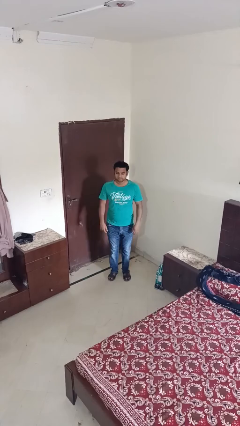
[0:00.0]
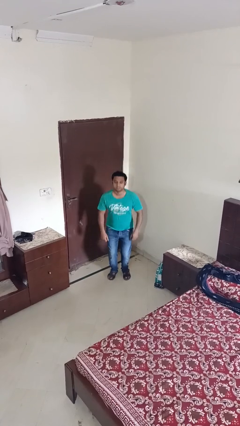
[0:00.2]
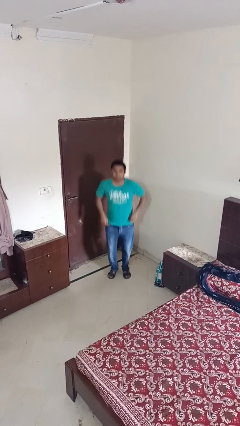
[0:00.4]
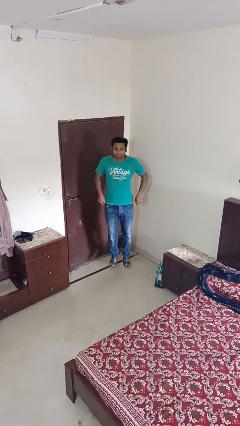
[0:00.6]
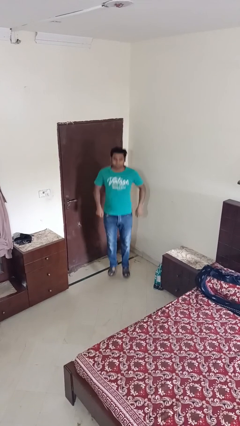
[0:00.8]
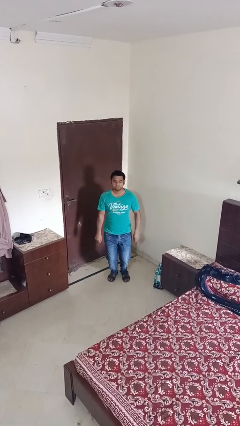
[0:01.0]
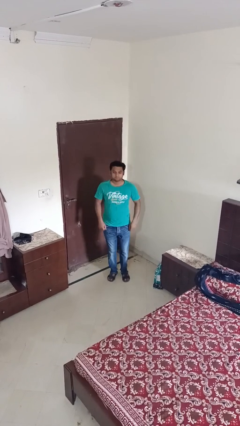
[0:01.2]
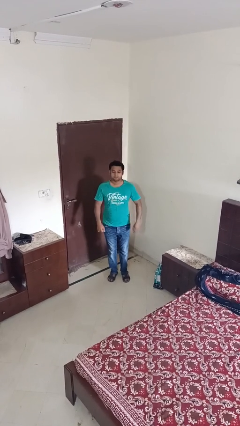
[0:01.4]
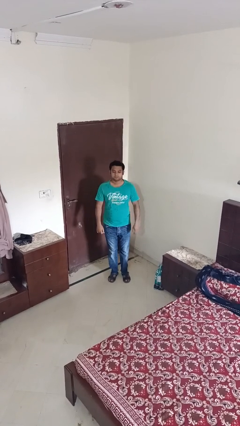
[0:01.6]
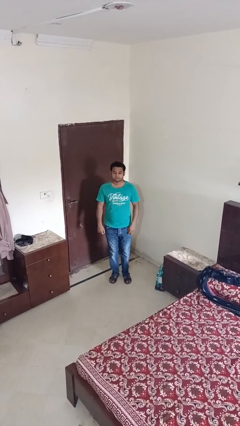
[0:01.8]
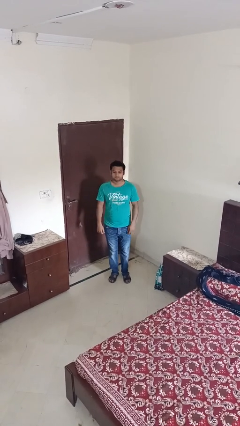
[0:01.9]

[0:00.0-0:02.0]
person jumps

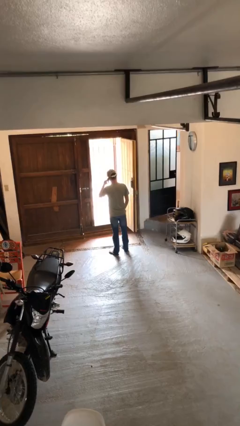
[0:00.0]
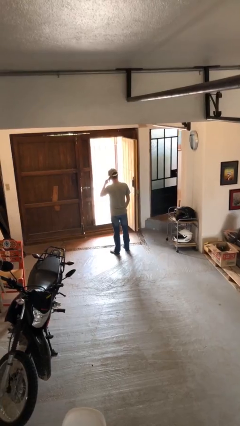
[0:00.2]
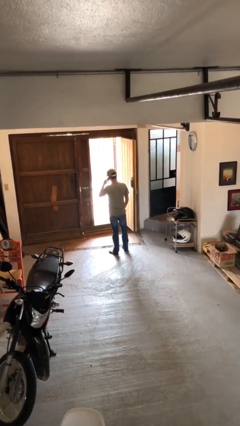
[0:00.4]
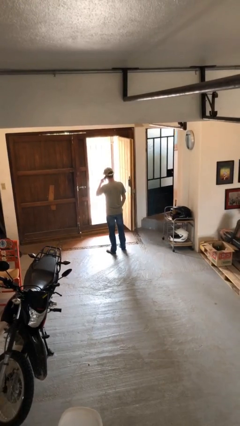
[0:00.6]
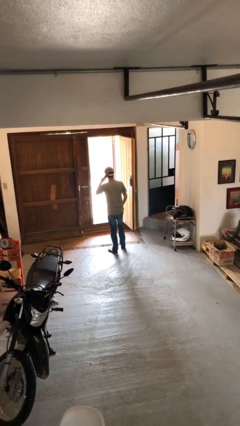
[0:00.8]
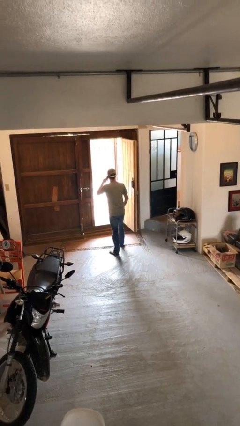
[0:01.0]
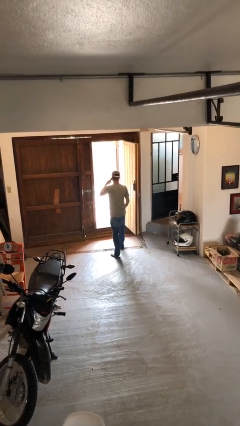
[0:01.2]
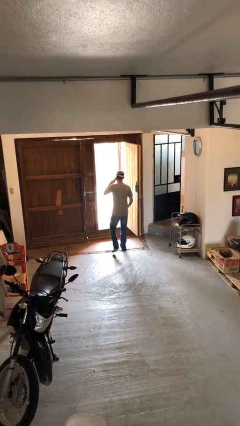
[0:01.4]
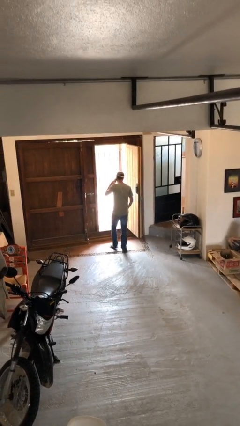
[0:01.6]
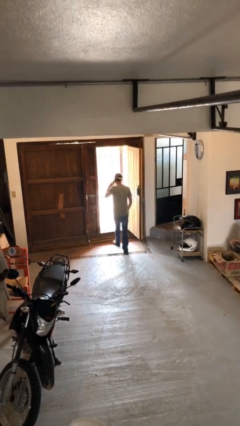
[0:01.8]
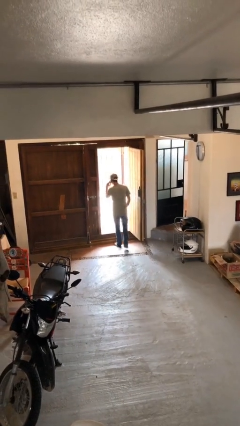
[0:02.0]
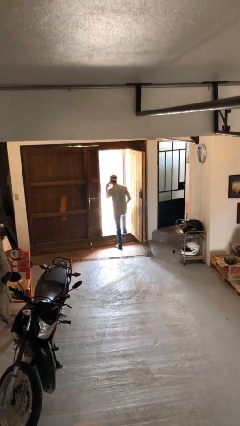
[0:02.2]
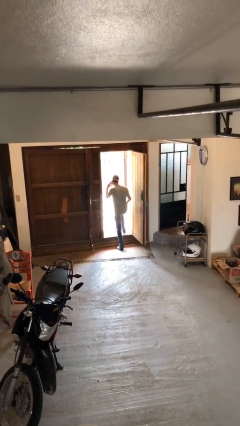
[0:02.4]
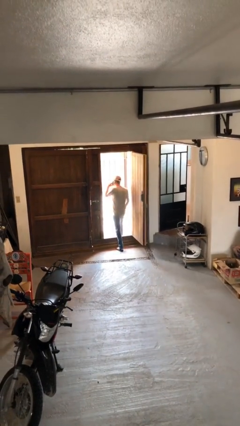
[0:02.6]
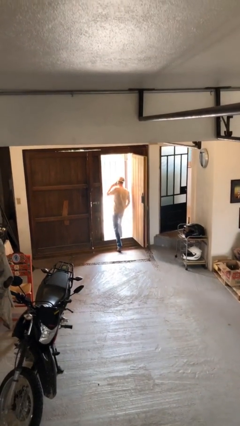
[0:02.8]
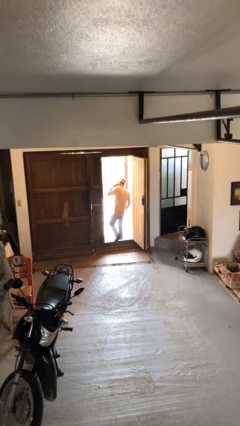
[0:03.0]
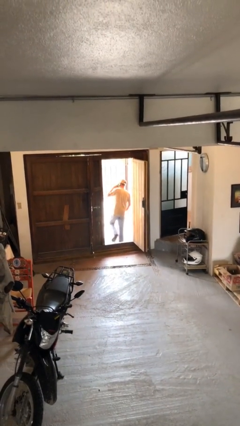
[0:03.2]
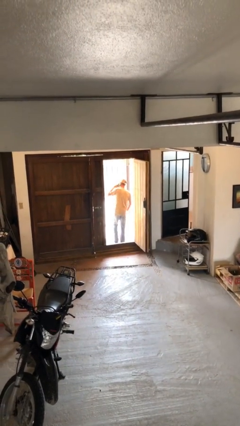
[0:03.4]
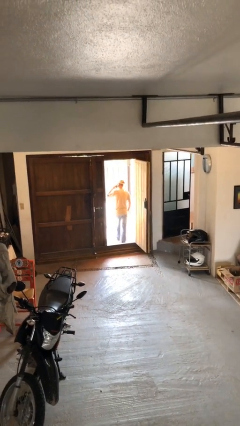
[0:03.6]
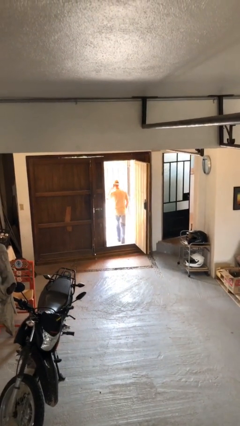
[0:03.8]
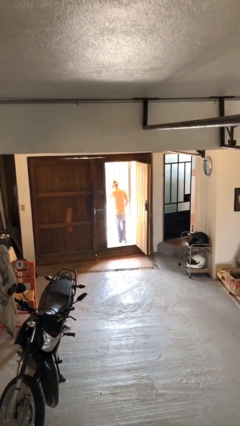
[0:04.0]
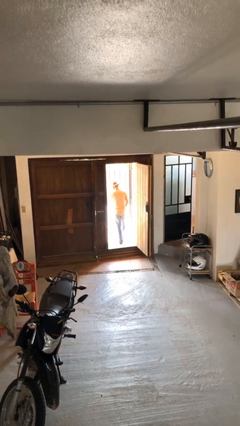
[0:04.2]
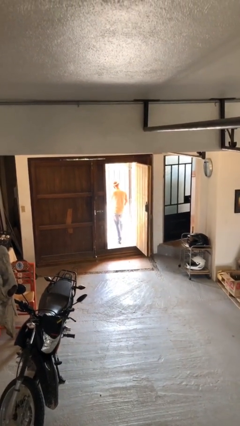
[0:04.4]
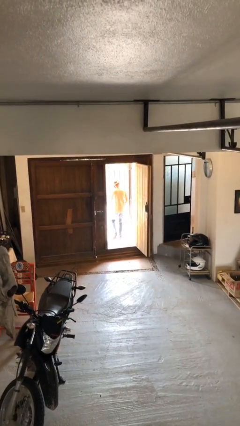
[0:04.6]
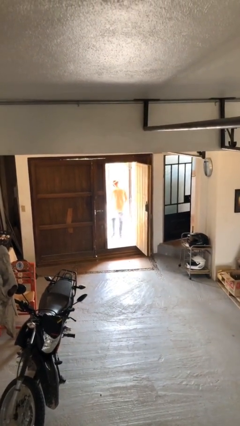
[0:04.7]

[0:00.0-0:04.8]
person exits scene through structure

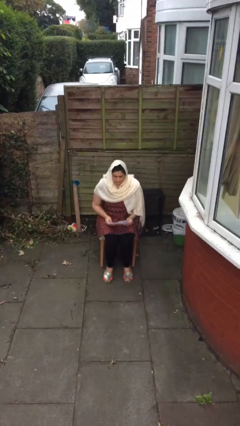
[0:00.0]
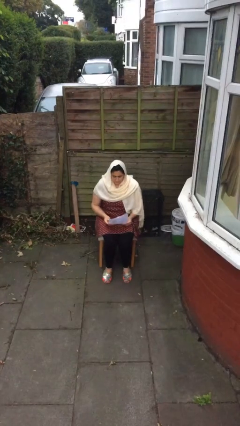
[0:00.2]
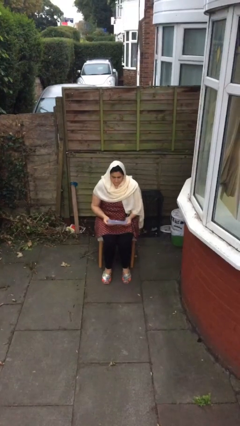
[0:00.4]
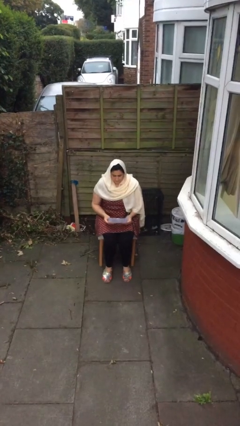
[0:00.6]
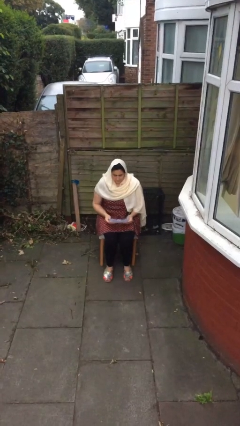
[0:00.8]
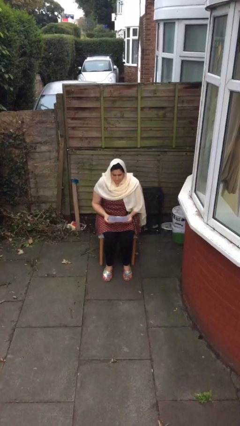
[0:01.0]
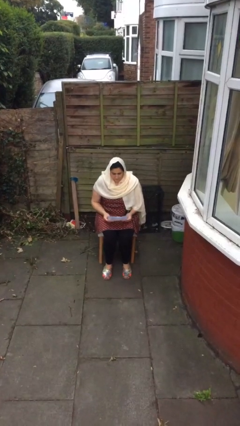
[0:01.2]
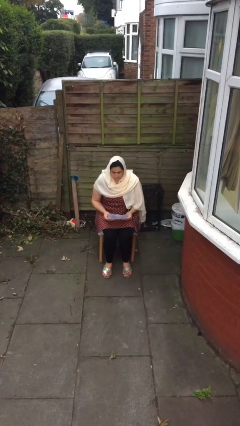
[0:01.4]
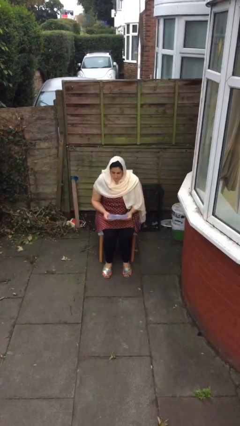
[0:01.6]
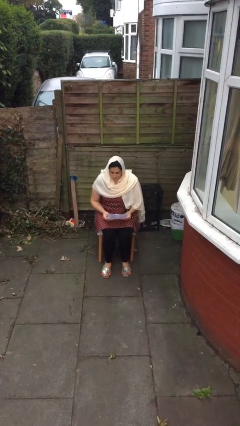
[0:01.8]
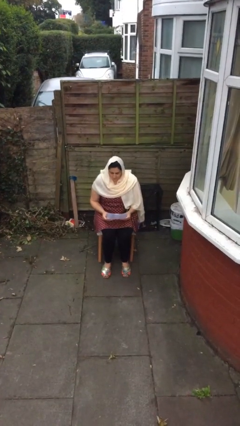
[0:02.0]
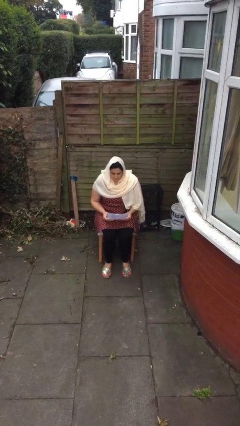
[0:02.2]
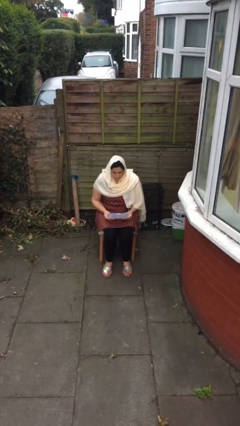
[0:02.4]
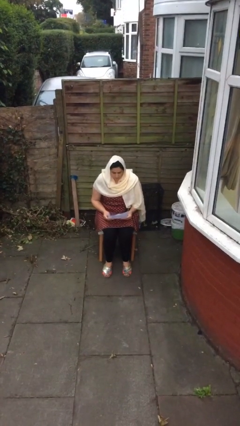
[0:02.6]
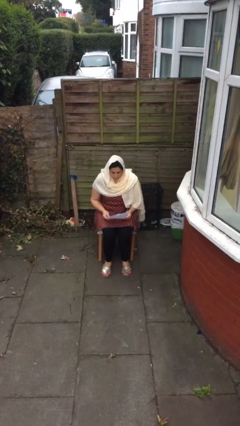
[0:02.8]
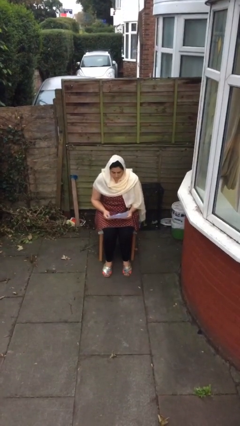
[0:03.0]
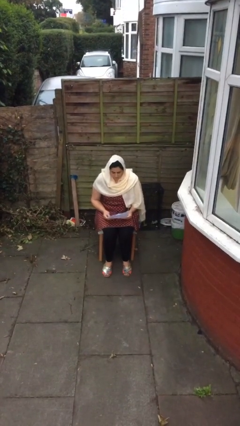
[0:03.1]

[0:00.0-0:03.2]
person reads document

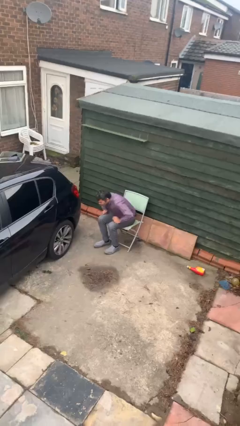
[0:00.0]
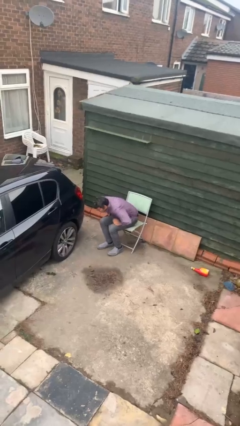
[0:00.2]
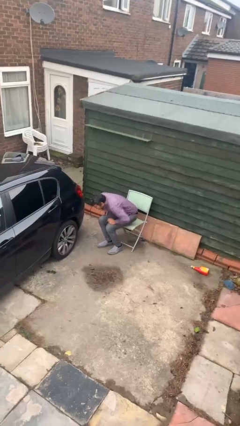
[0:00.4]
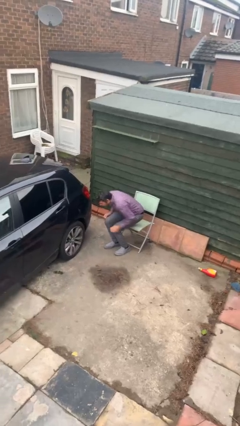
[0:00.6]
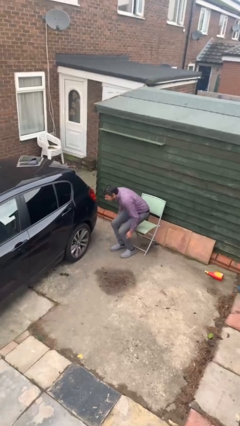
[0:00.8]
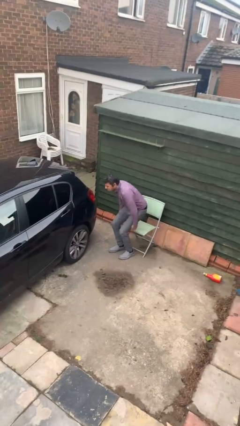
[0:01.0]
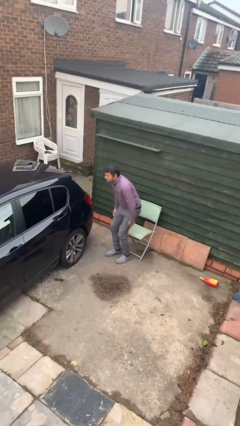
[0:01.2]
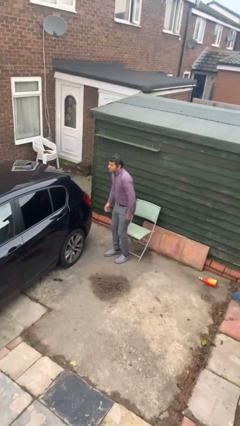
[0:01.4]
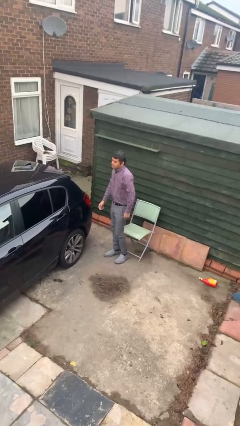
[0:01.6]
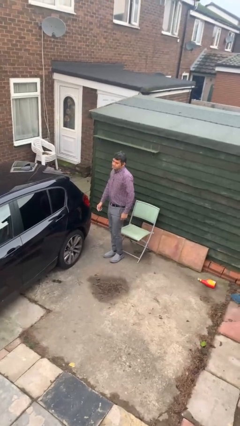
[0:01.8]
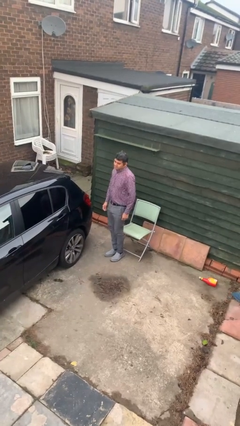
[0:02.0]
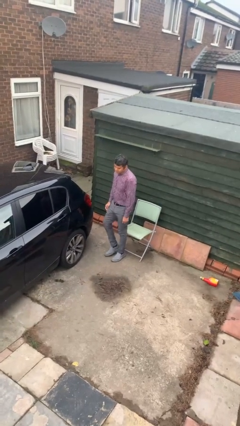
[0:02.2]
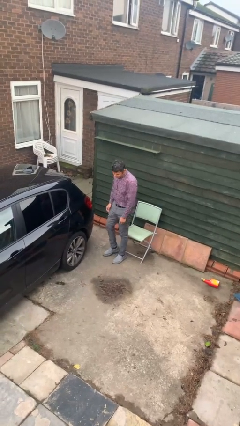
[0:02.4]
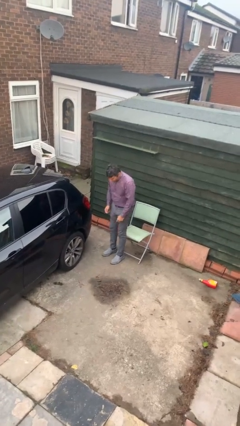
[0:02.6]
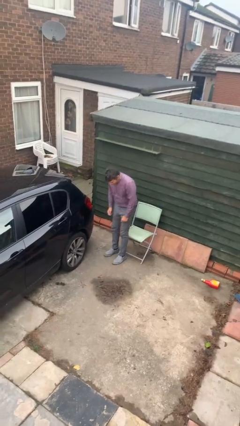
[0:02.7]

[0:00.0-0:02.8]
person stands up

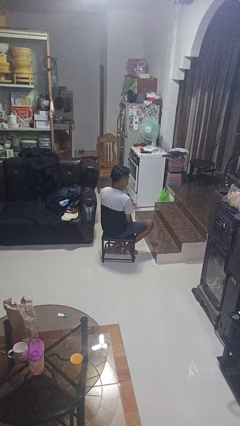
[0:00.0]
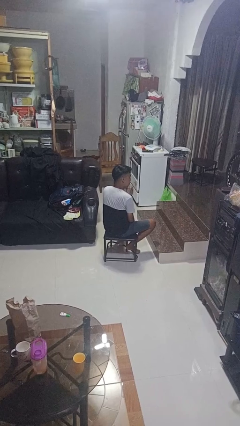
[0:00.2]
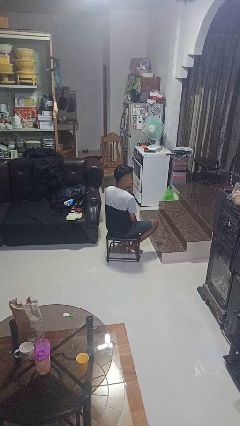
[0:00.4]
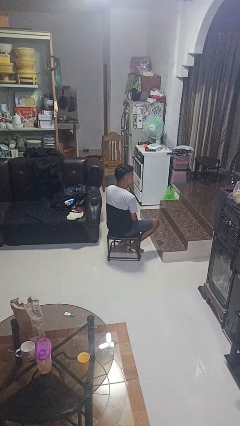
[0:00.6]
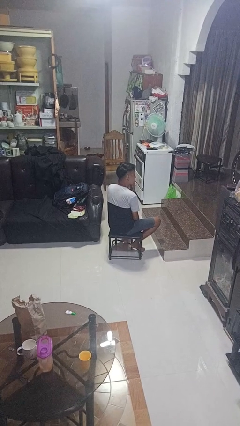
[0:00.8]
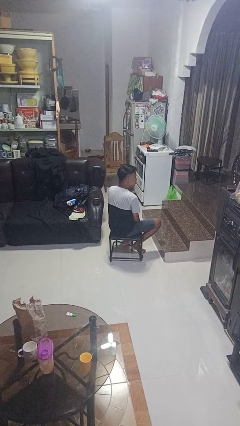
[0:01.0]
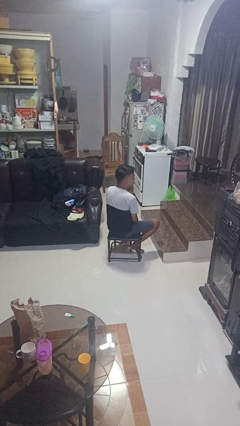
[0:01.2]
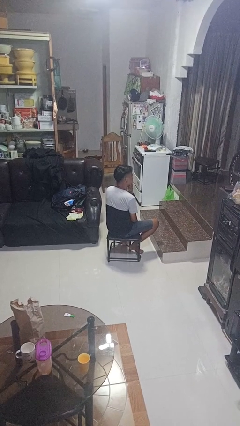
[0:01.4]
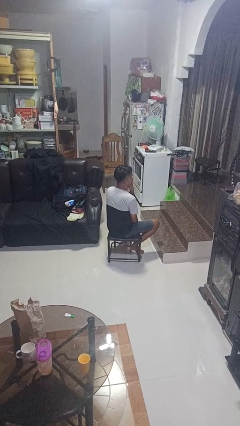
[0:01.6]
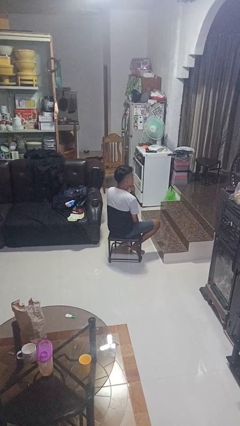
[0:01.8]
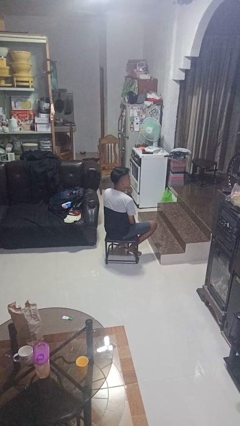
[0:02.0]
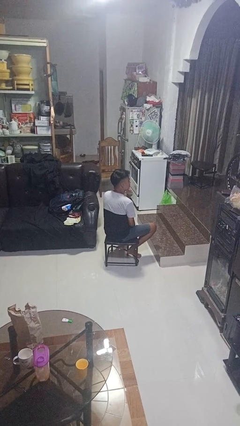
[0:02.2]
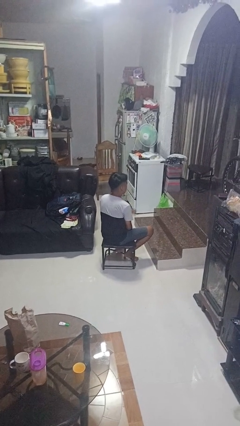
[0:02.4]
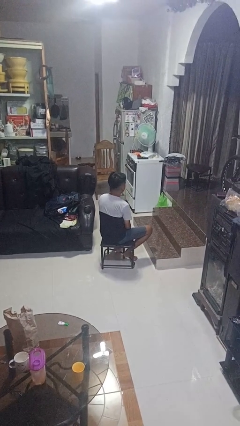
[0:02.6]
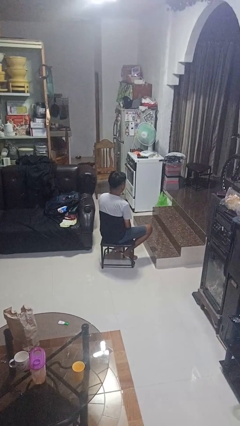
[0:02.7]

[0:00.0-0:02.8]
person strokes chin

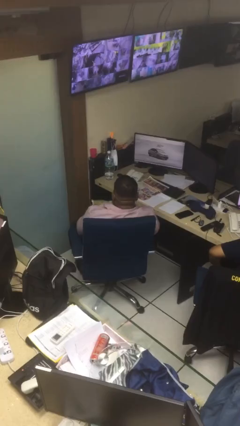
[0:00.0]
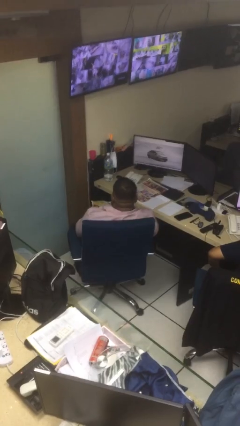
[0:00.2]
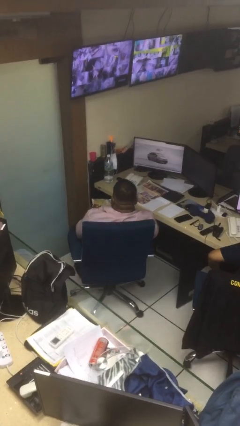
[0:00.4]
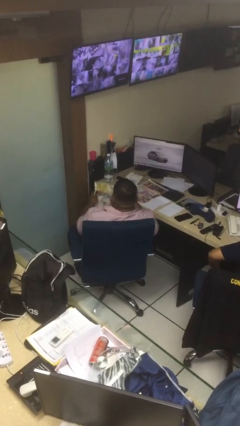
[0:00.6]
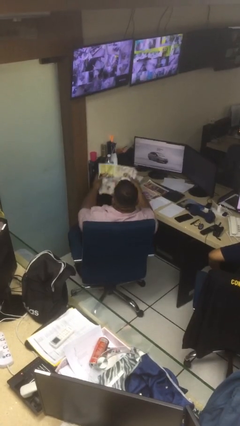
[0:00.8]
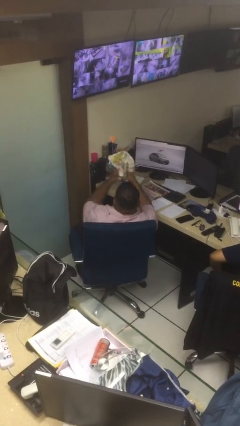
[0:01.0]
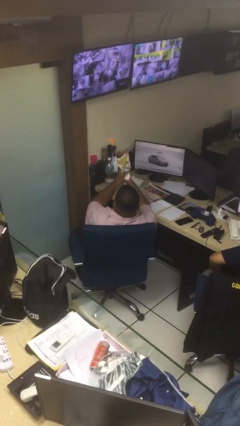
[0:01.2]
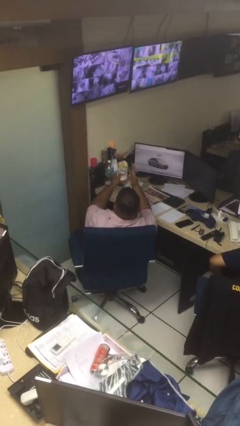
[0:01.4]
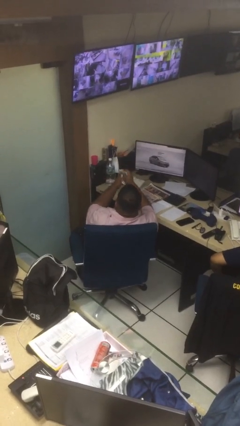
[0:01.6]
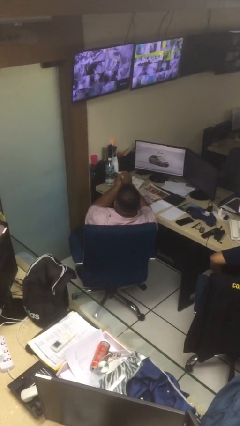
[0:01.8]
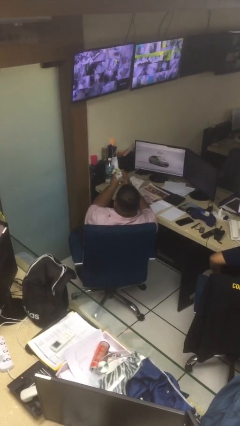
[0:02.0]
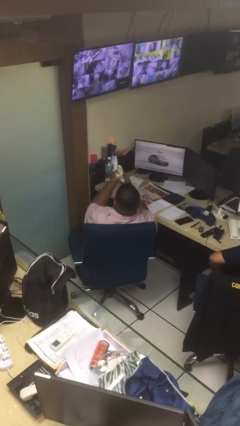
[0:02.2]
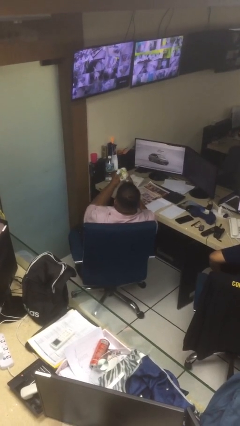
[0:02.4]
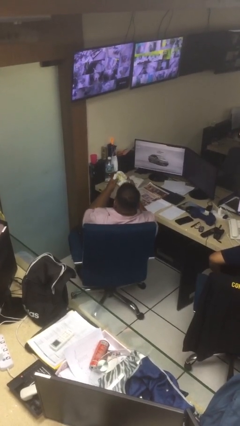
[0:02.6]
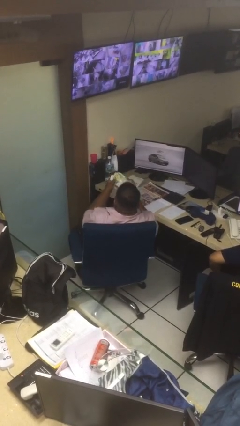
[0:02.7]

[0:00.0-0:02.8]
person crumples paper
